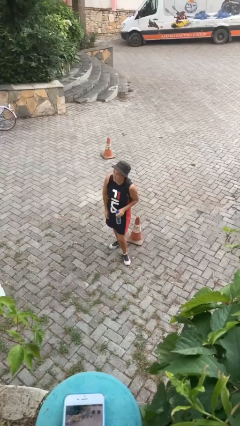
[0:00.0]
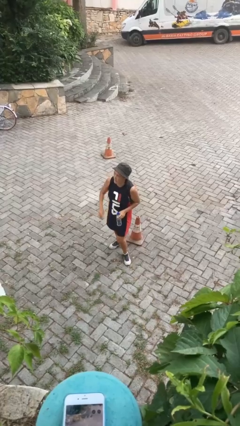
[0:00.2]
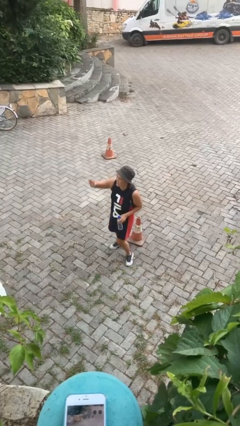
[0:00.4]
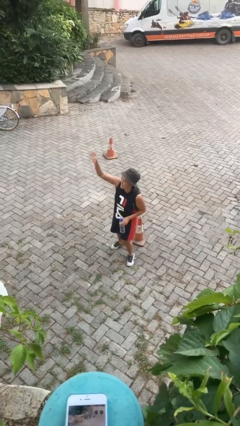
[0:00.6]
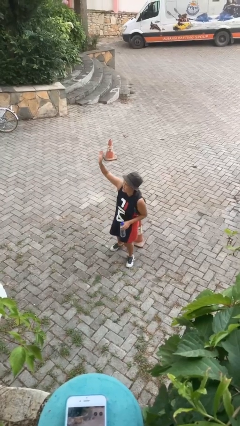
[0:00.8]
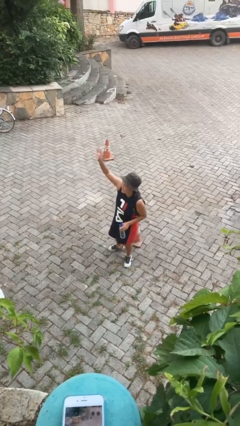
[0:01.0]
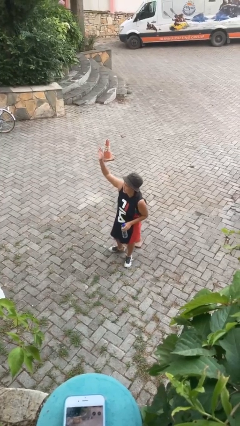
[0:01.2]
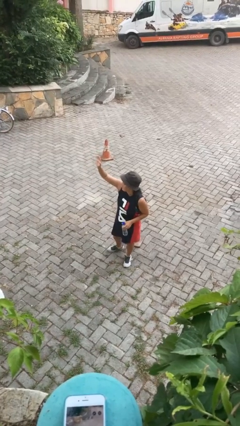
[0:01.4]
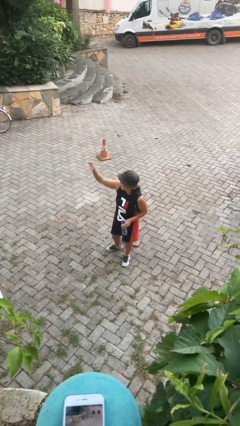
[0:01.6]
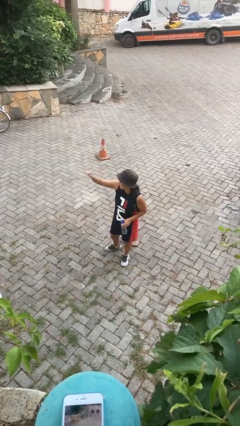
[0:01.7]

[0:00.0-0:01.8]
person gestures raise hand

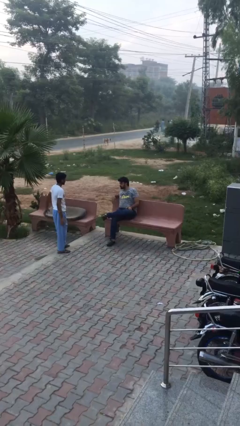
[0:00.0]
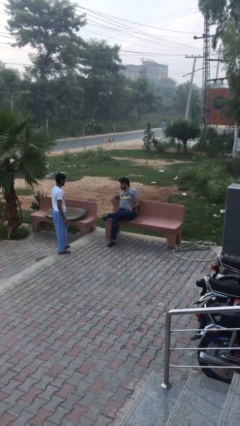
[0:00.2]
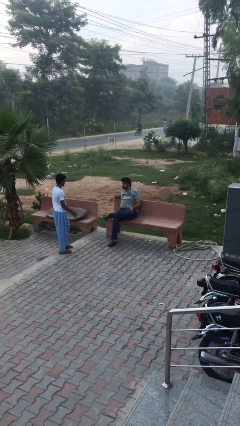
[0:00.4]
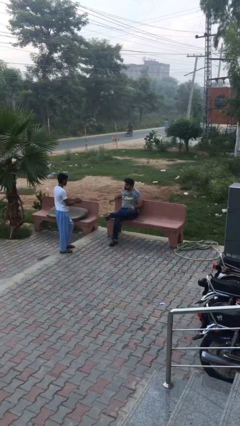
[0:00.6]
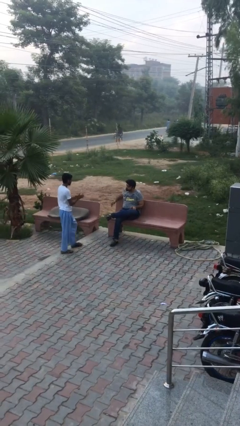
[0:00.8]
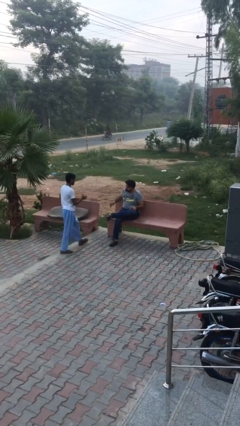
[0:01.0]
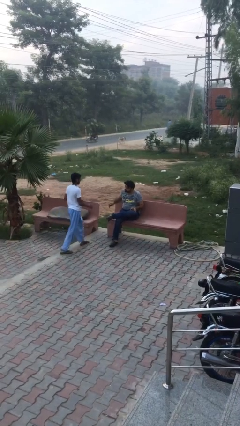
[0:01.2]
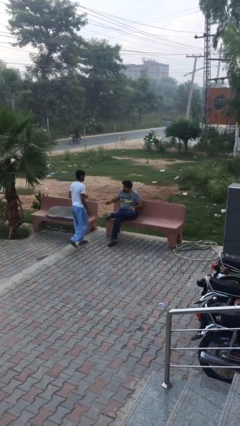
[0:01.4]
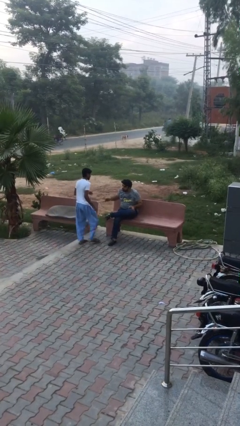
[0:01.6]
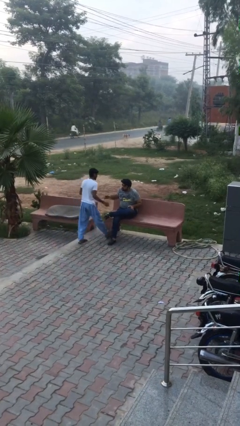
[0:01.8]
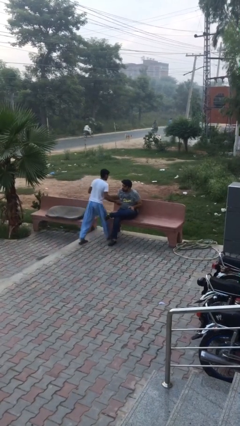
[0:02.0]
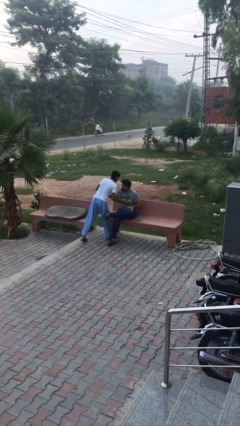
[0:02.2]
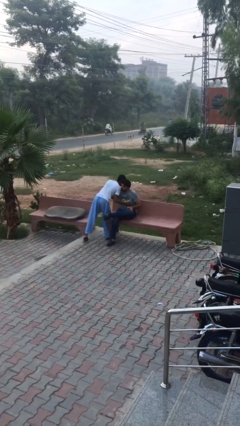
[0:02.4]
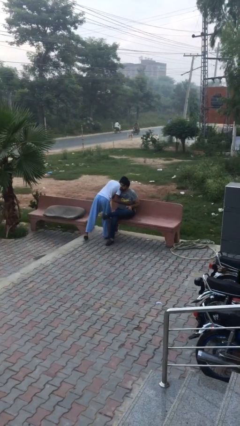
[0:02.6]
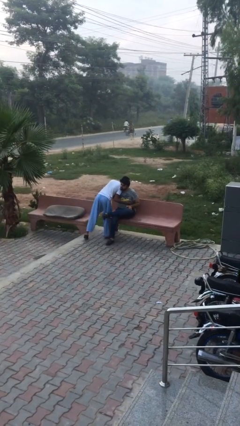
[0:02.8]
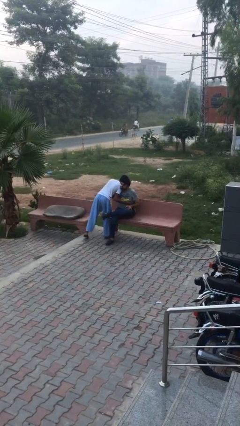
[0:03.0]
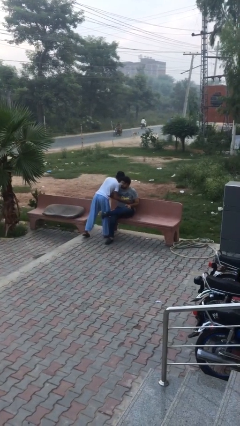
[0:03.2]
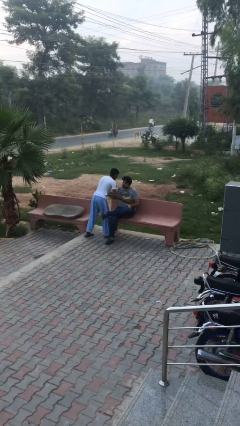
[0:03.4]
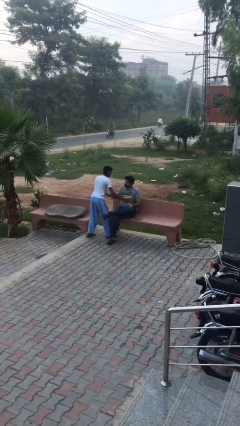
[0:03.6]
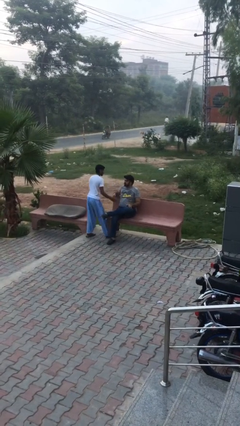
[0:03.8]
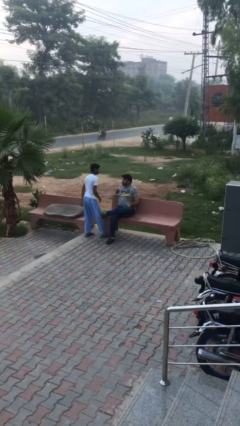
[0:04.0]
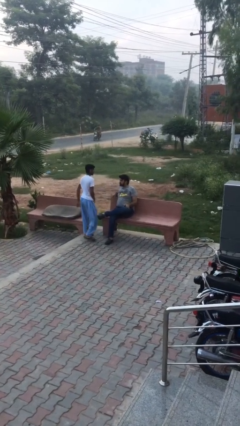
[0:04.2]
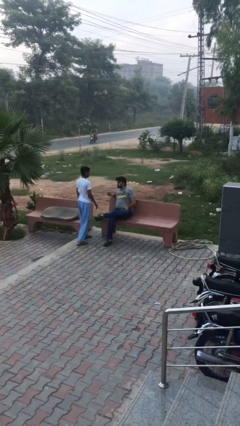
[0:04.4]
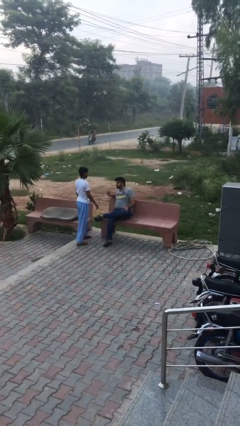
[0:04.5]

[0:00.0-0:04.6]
person embraces person

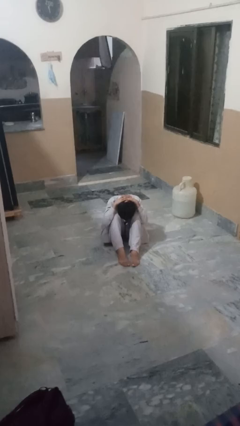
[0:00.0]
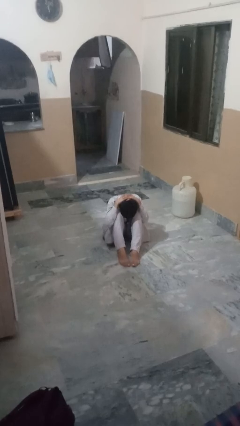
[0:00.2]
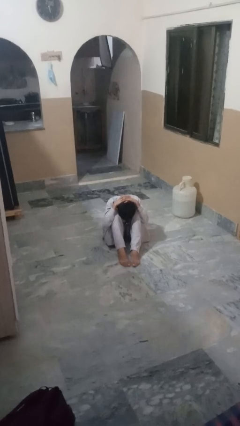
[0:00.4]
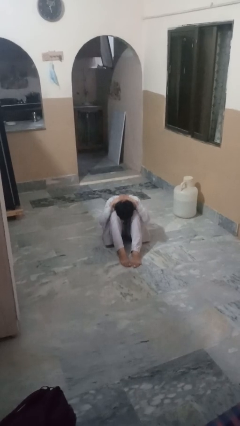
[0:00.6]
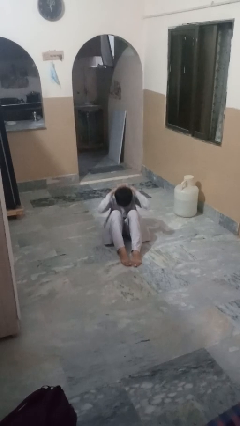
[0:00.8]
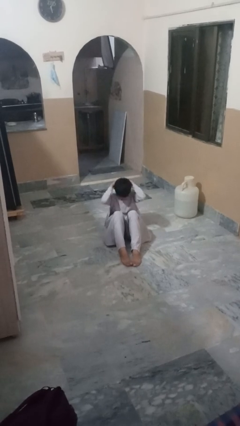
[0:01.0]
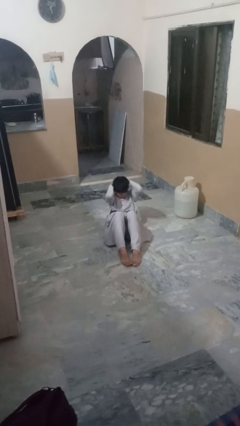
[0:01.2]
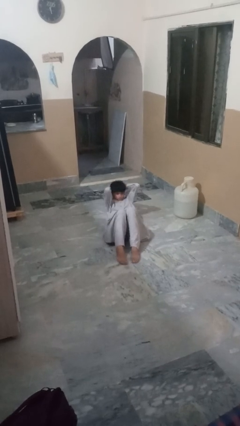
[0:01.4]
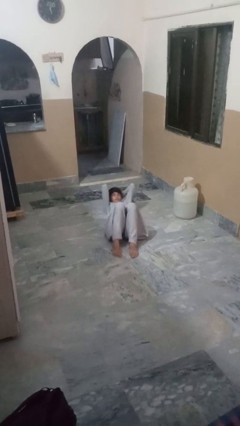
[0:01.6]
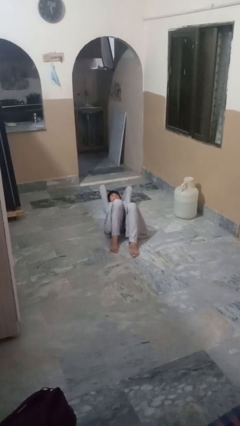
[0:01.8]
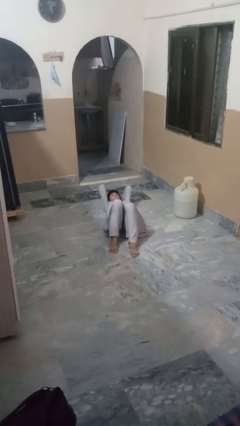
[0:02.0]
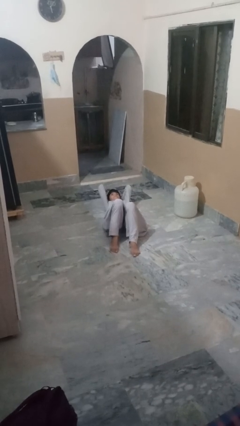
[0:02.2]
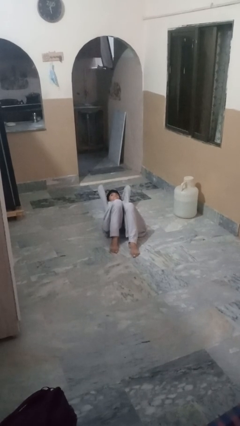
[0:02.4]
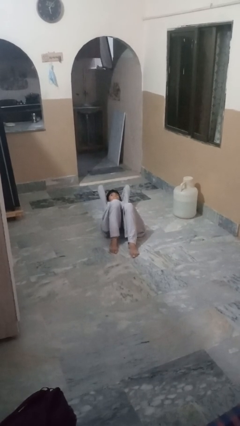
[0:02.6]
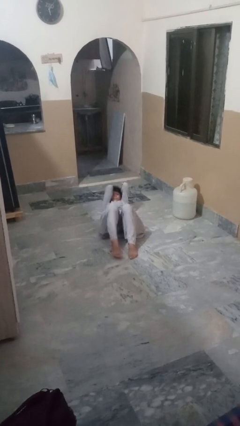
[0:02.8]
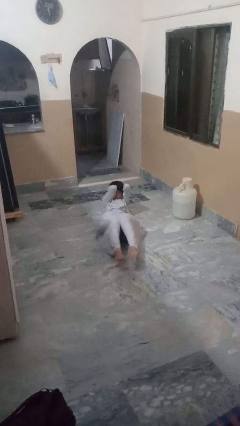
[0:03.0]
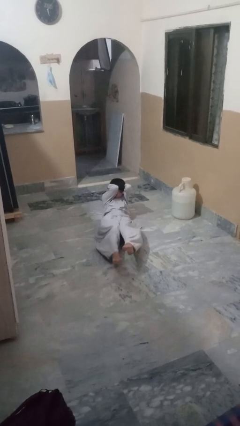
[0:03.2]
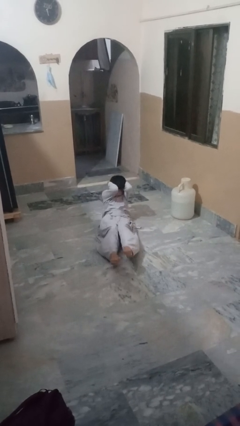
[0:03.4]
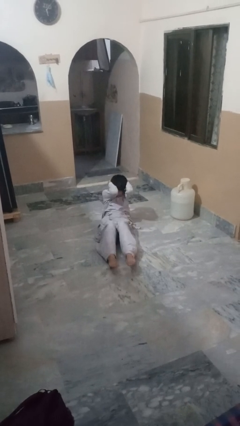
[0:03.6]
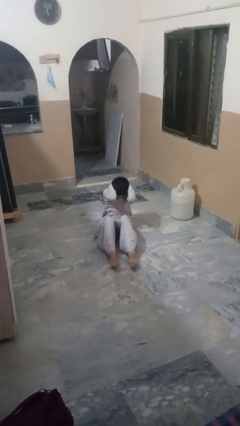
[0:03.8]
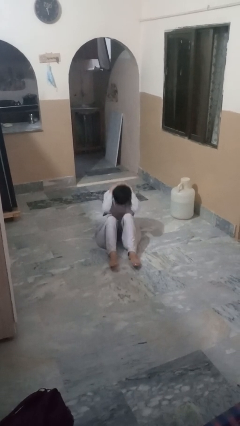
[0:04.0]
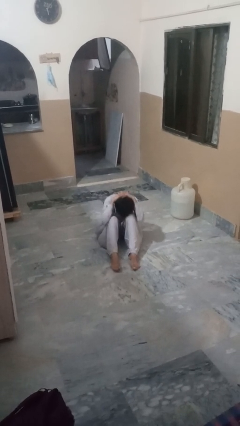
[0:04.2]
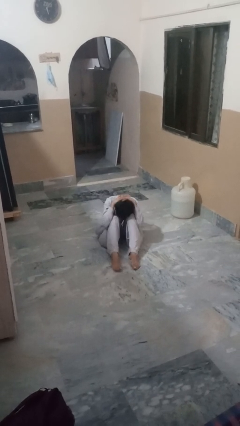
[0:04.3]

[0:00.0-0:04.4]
person exercises with situp

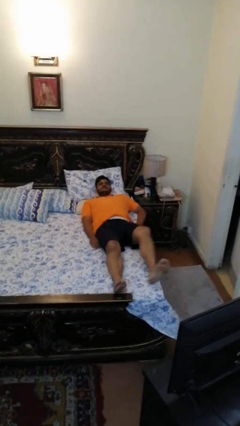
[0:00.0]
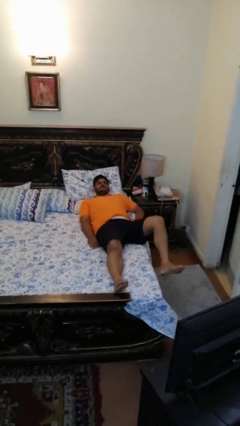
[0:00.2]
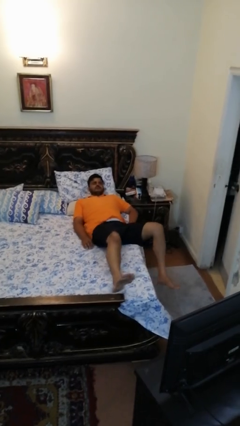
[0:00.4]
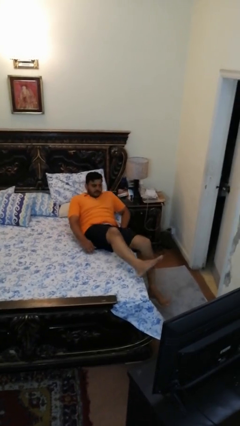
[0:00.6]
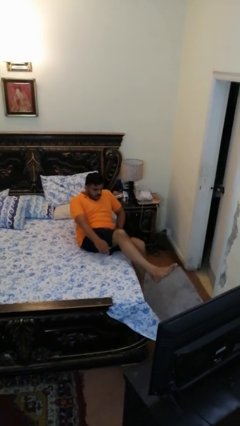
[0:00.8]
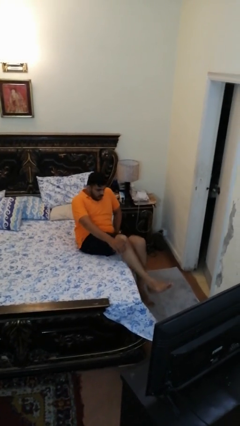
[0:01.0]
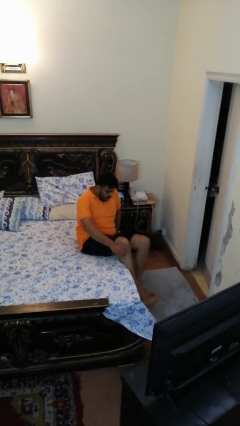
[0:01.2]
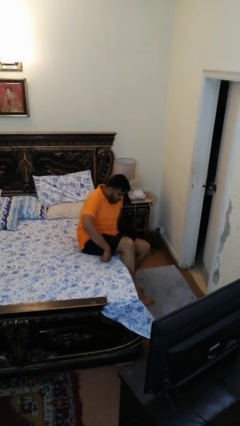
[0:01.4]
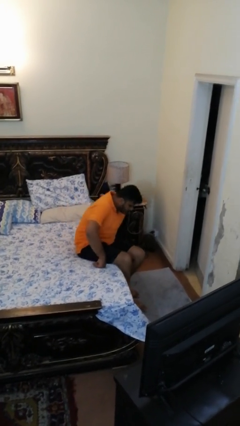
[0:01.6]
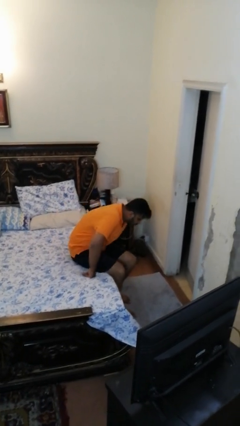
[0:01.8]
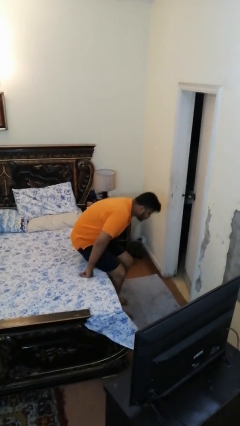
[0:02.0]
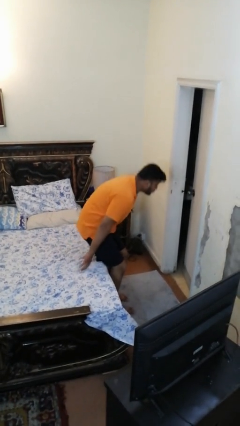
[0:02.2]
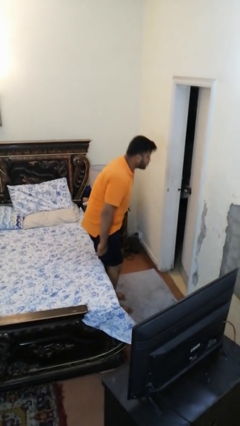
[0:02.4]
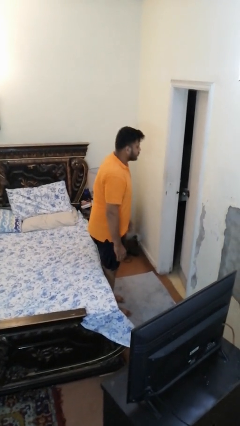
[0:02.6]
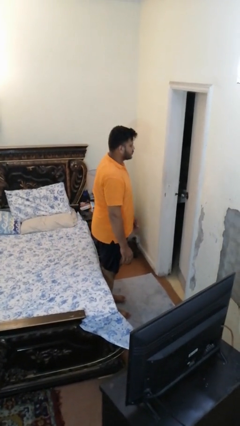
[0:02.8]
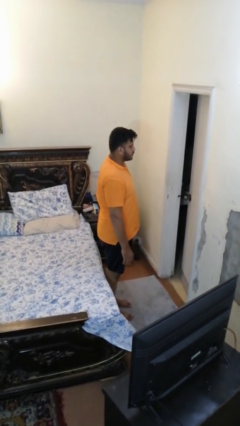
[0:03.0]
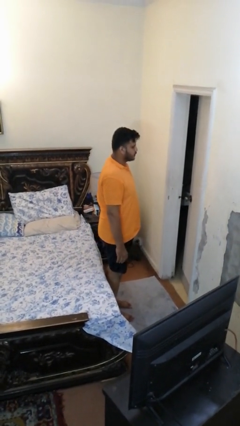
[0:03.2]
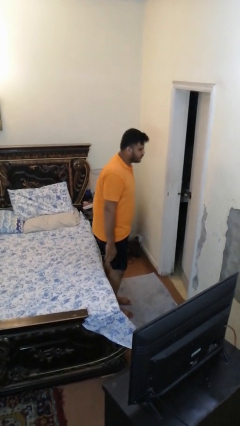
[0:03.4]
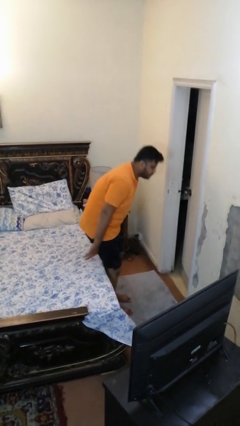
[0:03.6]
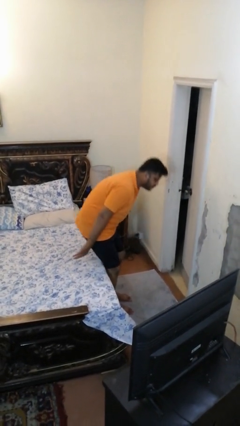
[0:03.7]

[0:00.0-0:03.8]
person stands up

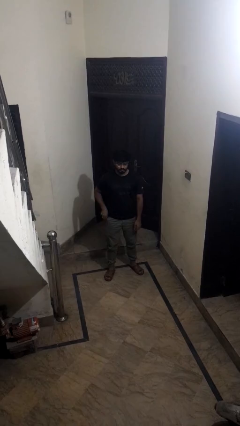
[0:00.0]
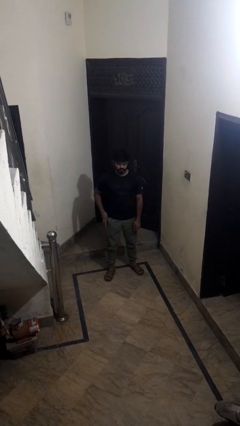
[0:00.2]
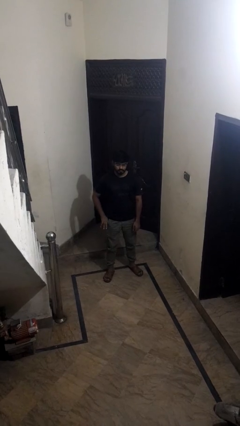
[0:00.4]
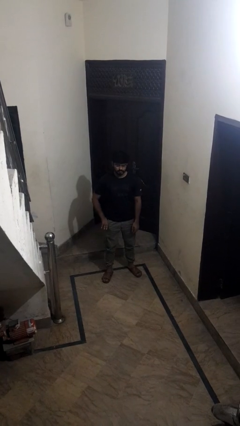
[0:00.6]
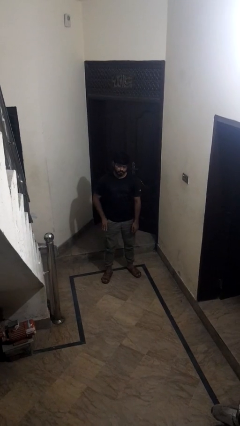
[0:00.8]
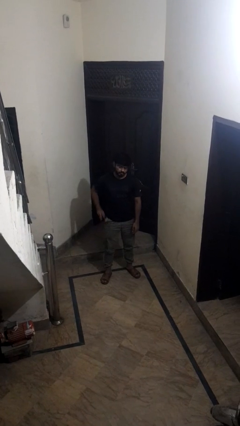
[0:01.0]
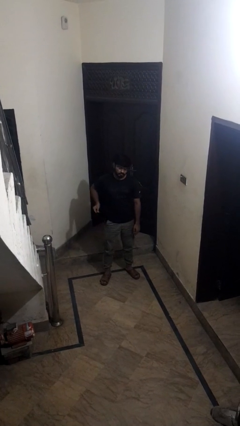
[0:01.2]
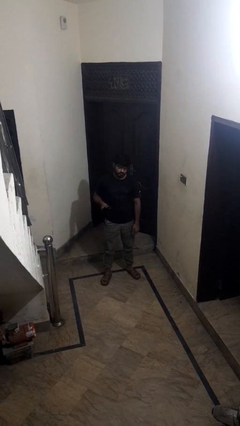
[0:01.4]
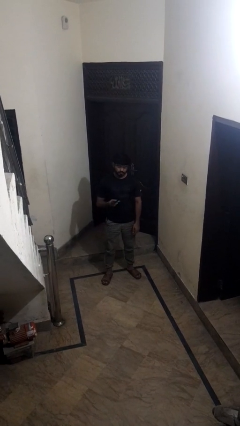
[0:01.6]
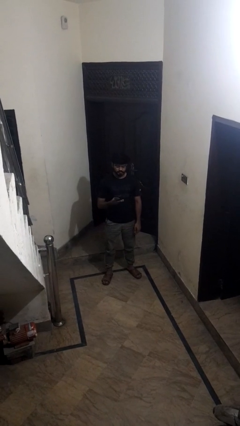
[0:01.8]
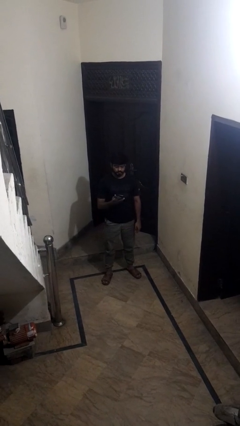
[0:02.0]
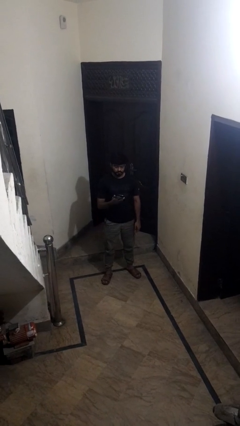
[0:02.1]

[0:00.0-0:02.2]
person takes phone from pocket

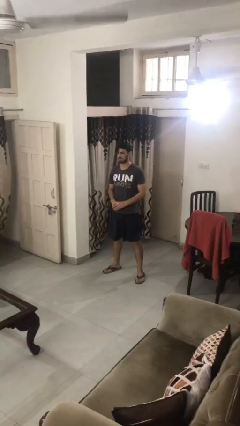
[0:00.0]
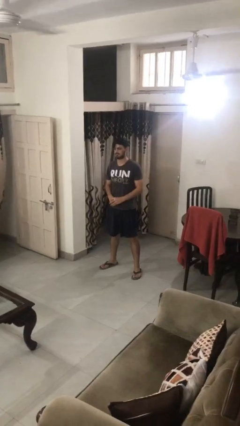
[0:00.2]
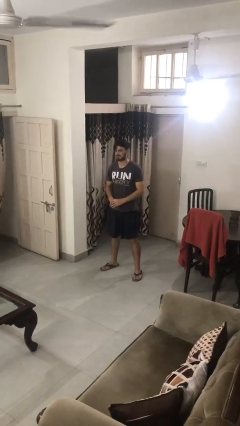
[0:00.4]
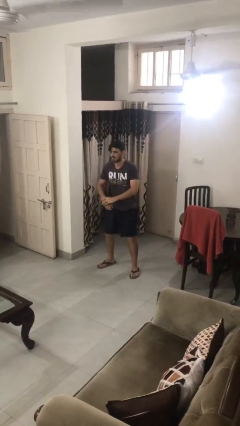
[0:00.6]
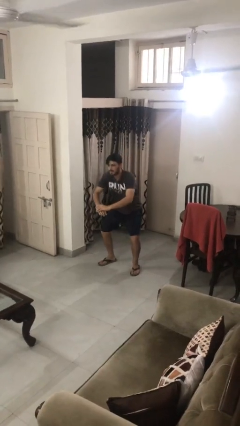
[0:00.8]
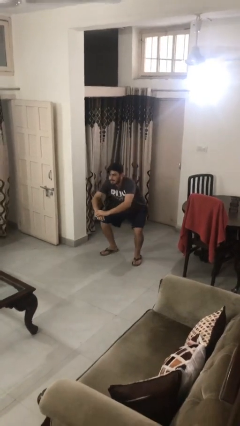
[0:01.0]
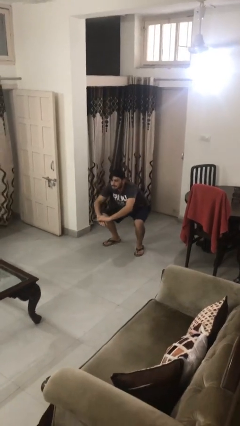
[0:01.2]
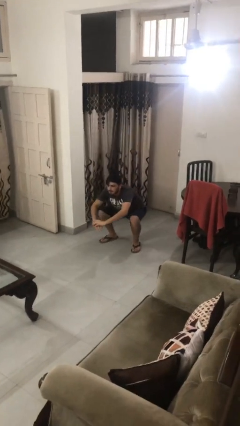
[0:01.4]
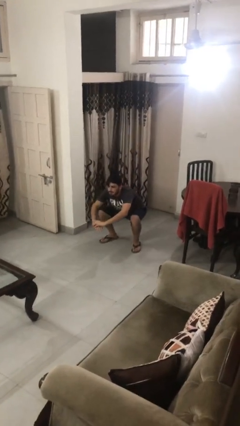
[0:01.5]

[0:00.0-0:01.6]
person squats
